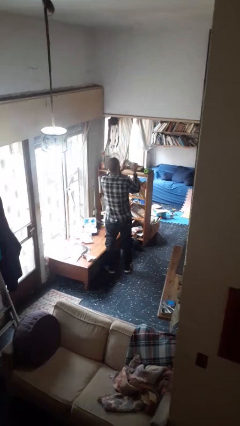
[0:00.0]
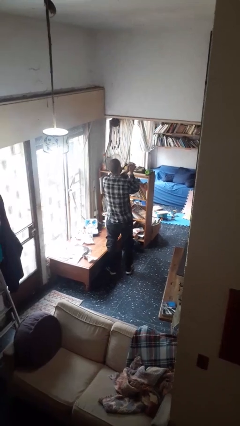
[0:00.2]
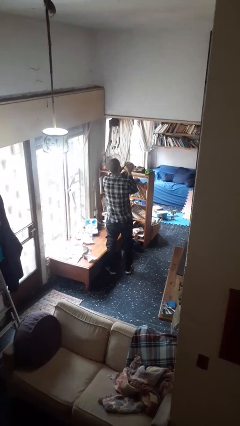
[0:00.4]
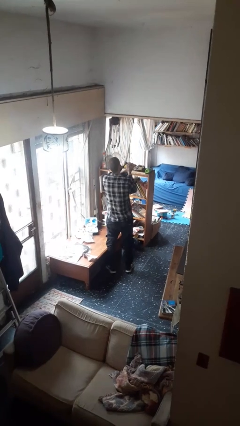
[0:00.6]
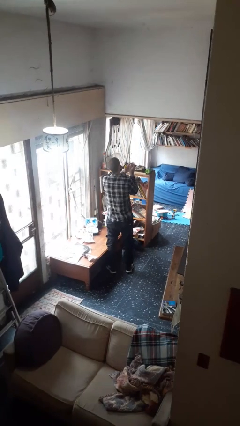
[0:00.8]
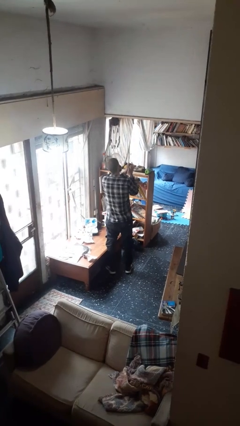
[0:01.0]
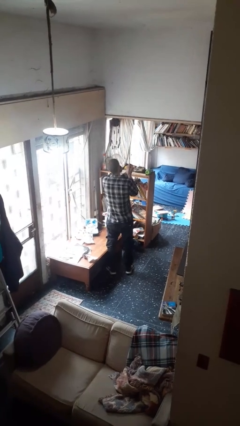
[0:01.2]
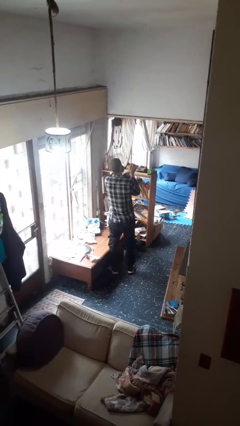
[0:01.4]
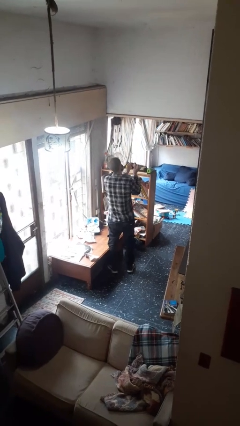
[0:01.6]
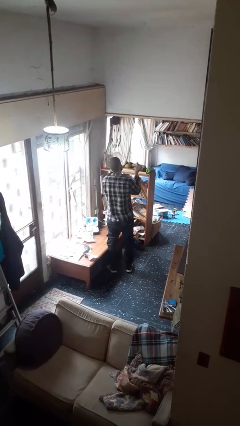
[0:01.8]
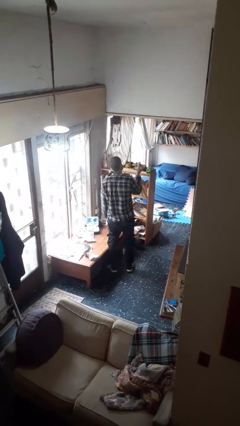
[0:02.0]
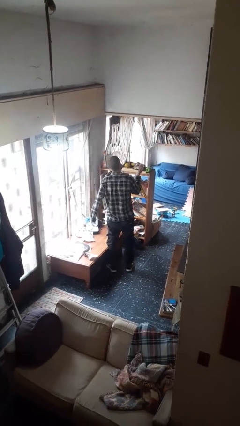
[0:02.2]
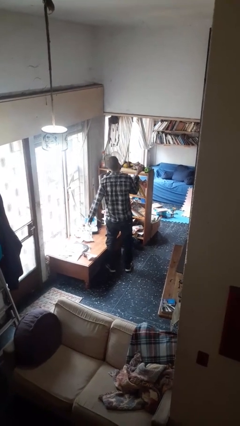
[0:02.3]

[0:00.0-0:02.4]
person crumples paper

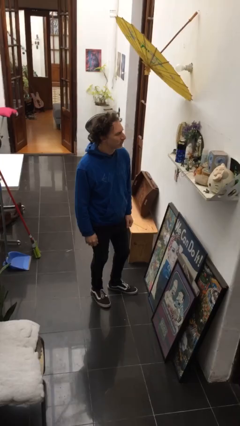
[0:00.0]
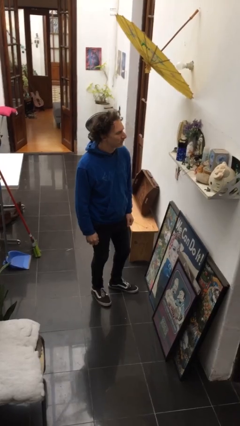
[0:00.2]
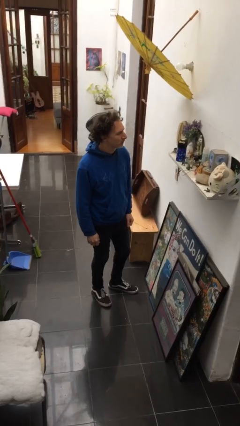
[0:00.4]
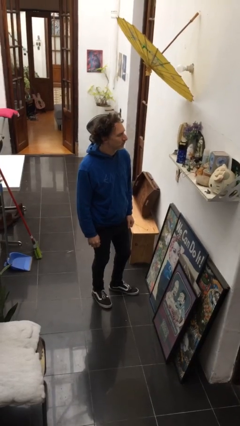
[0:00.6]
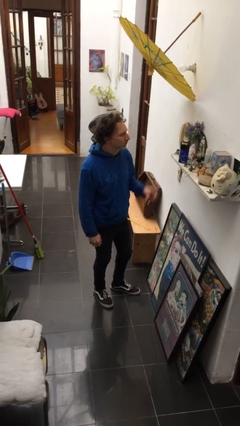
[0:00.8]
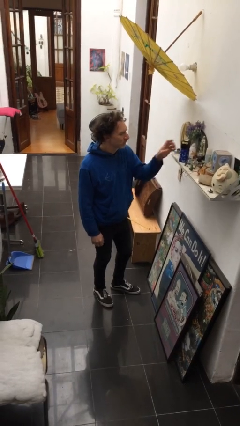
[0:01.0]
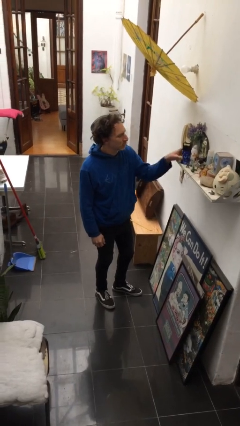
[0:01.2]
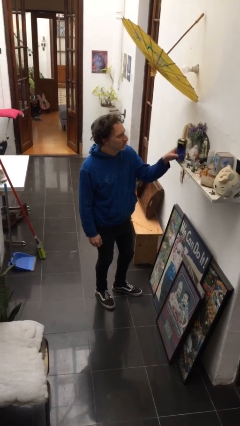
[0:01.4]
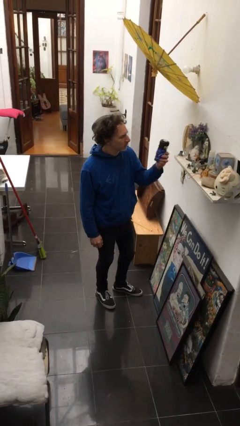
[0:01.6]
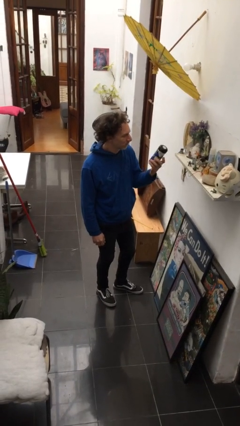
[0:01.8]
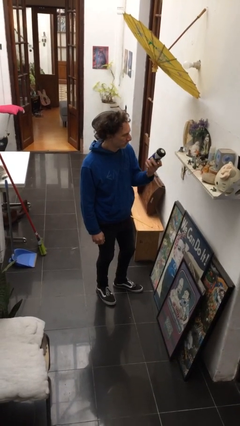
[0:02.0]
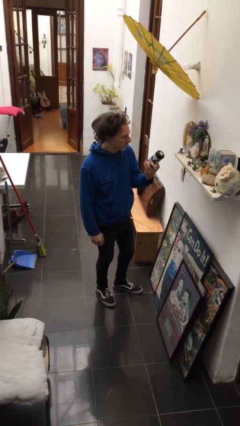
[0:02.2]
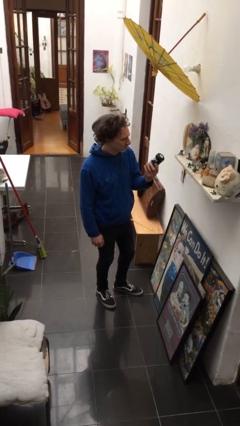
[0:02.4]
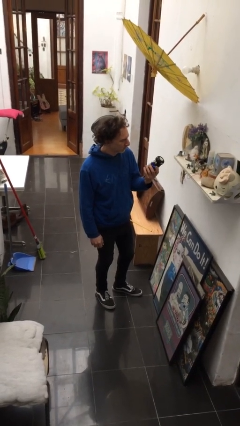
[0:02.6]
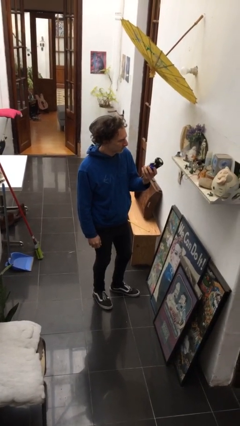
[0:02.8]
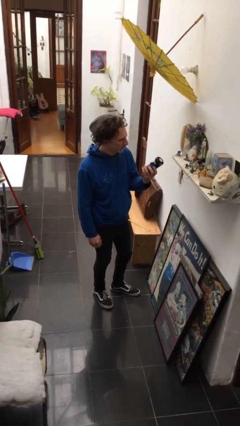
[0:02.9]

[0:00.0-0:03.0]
person picks up object from shelf

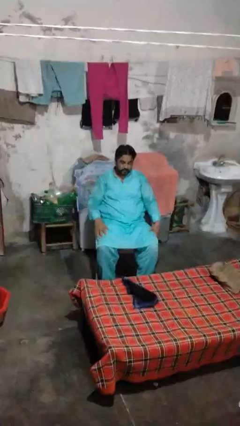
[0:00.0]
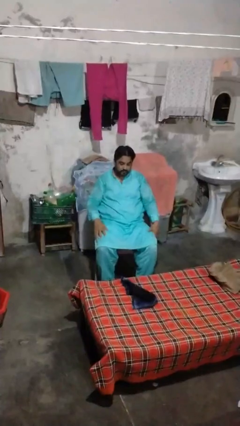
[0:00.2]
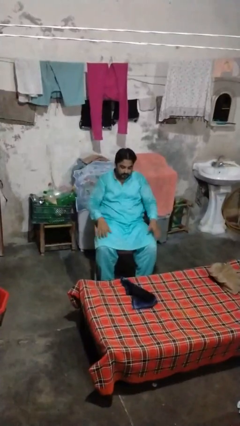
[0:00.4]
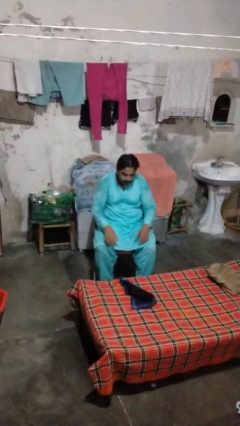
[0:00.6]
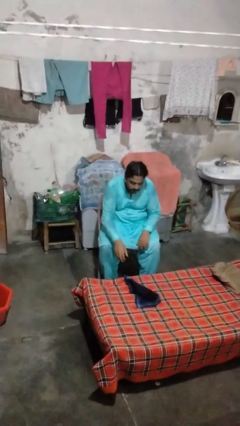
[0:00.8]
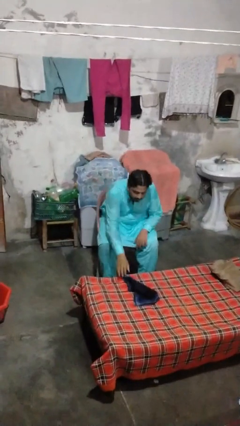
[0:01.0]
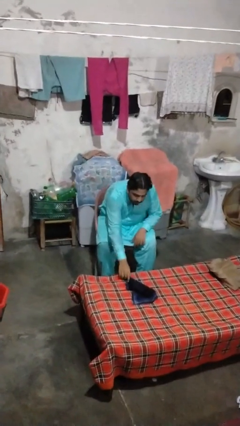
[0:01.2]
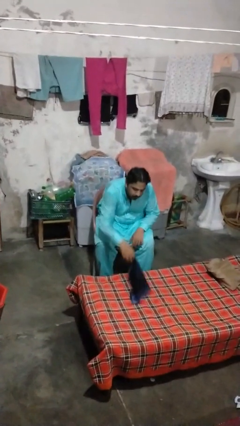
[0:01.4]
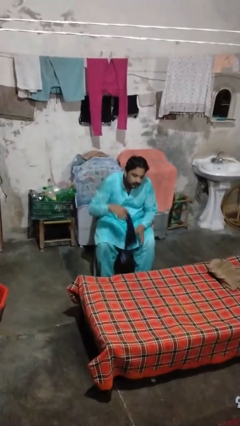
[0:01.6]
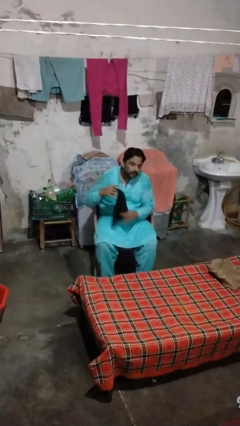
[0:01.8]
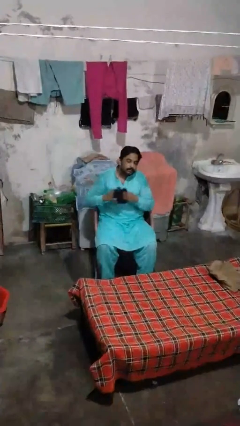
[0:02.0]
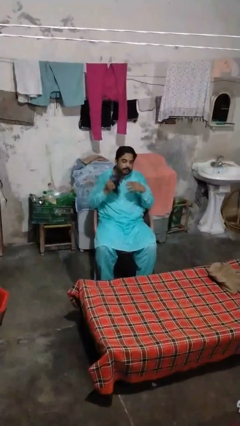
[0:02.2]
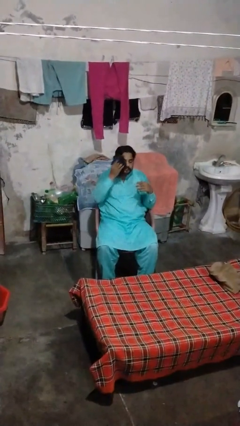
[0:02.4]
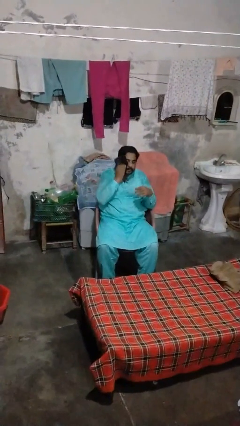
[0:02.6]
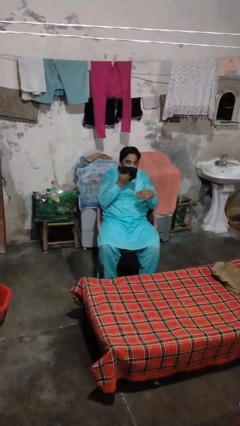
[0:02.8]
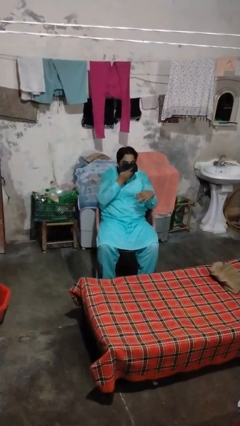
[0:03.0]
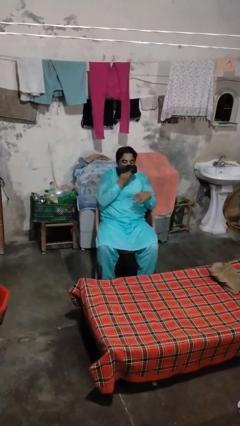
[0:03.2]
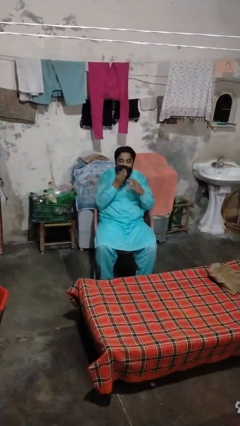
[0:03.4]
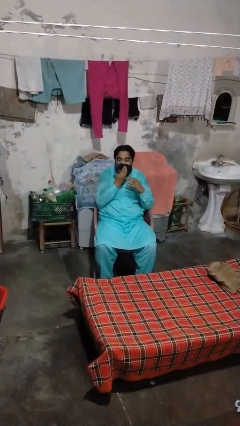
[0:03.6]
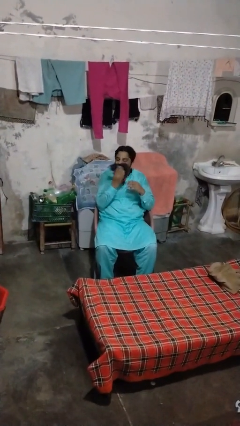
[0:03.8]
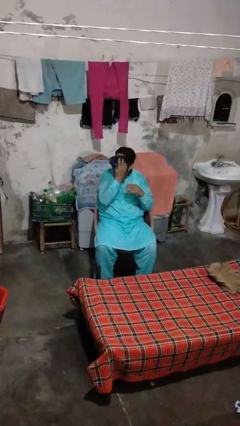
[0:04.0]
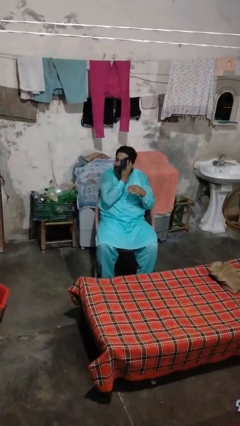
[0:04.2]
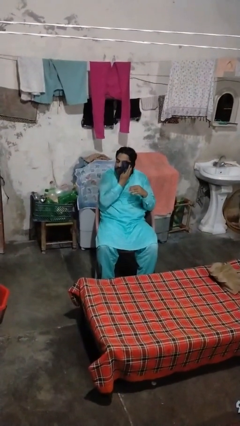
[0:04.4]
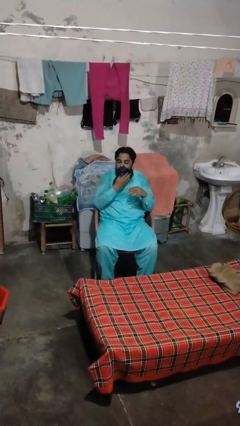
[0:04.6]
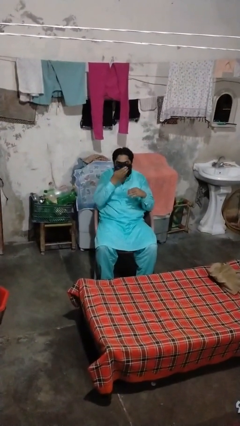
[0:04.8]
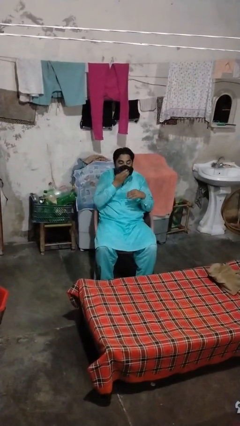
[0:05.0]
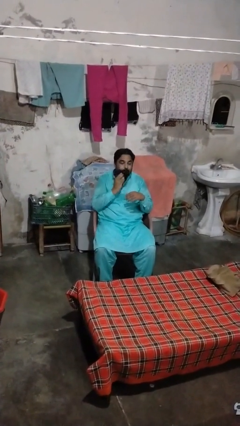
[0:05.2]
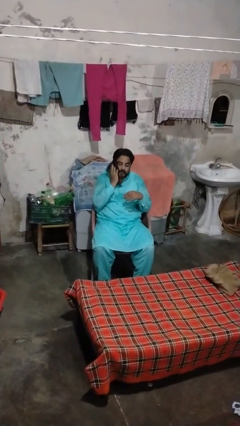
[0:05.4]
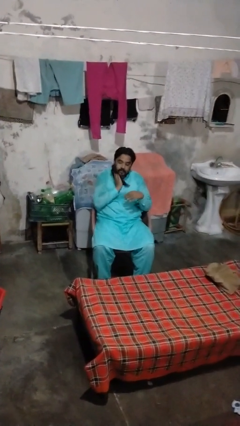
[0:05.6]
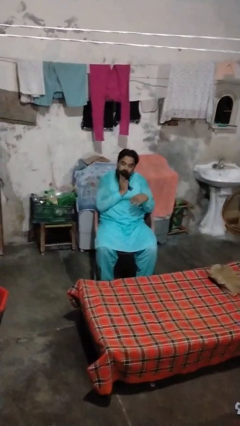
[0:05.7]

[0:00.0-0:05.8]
person wipes mouth with napkin

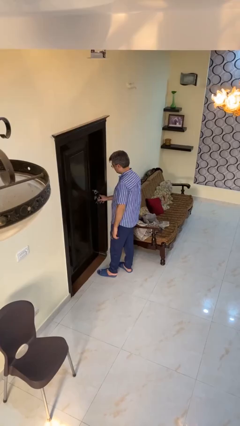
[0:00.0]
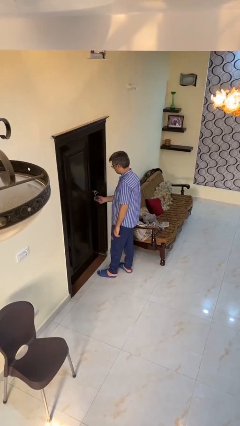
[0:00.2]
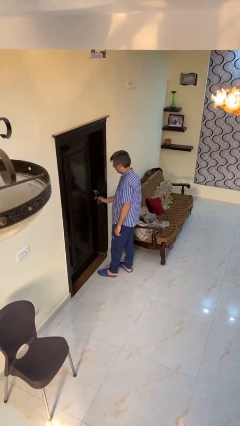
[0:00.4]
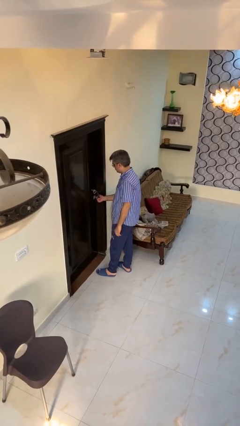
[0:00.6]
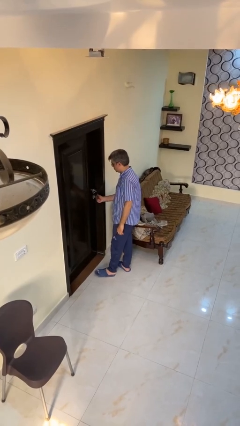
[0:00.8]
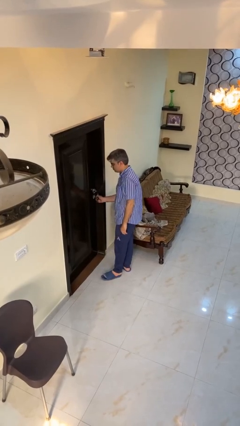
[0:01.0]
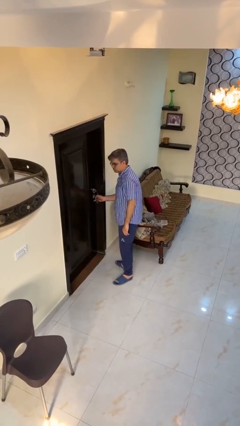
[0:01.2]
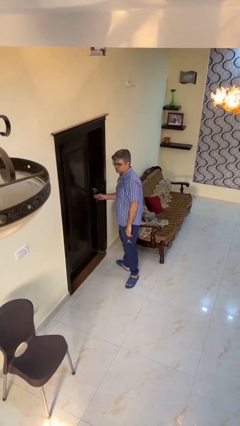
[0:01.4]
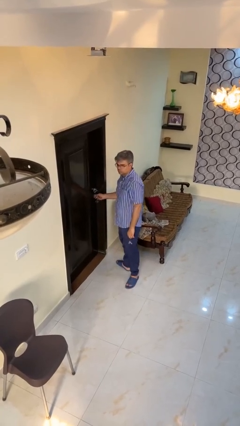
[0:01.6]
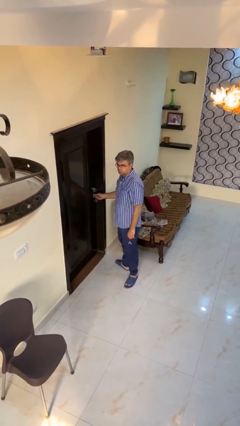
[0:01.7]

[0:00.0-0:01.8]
person locks door with keys

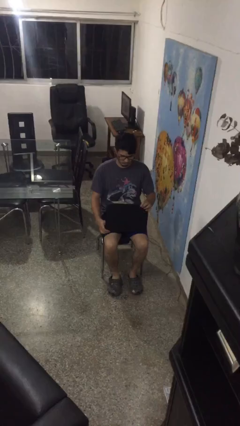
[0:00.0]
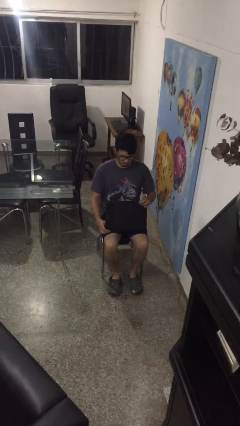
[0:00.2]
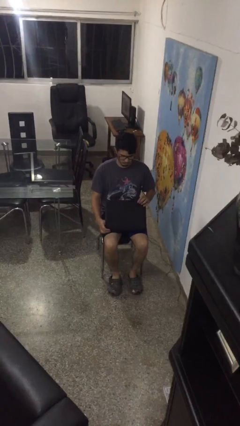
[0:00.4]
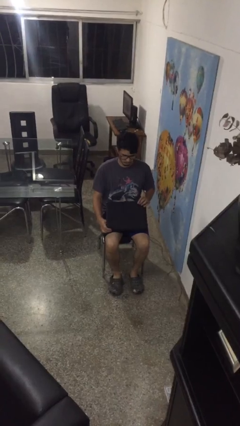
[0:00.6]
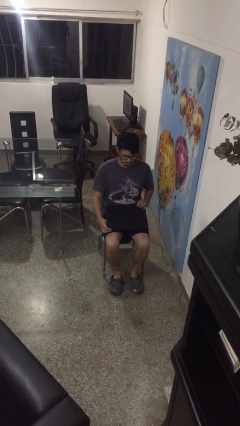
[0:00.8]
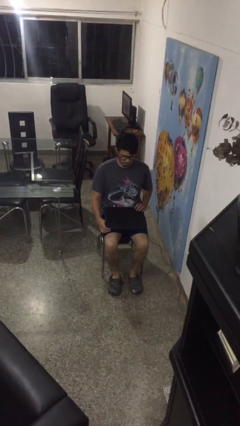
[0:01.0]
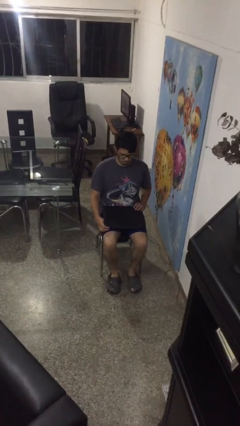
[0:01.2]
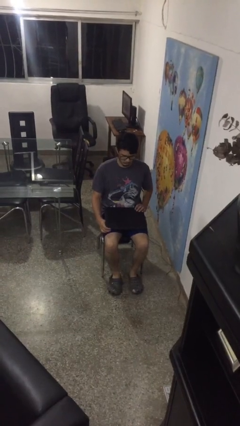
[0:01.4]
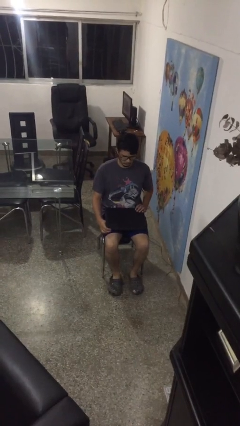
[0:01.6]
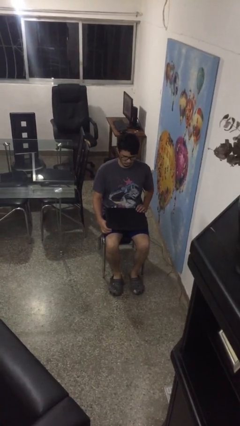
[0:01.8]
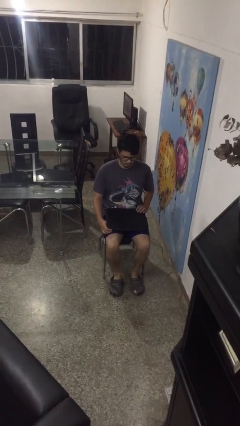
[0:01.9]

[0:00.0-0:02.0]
person closes laptop

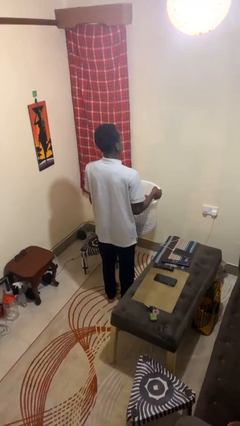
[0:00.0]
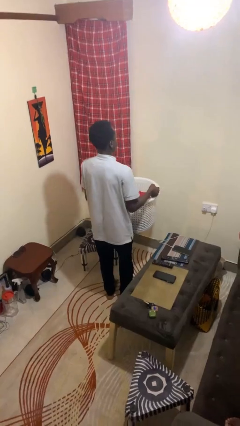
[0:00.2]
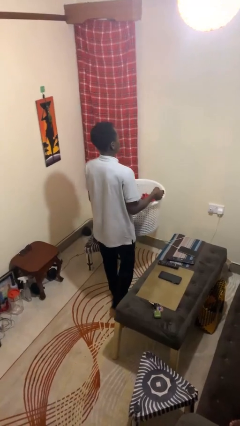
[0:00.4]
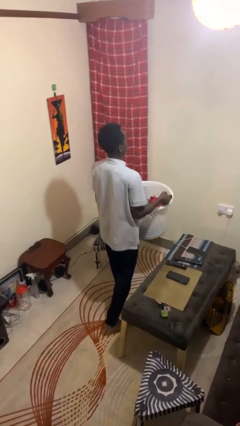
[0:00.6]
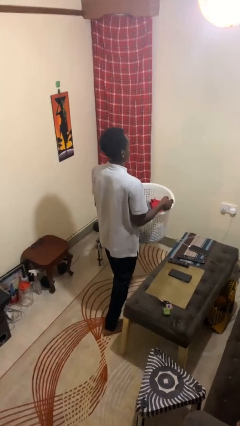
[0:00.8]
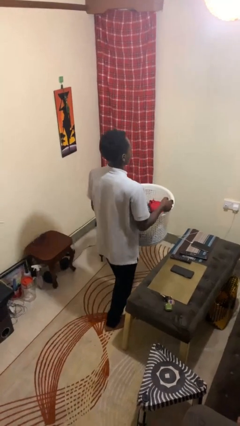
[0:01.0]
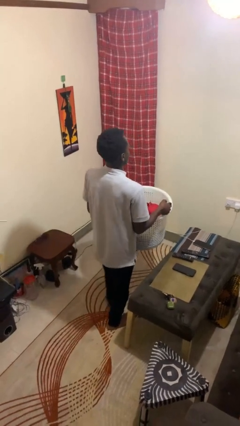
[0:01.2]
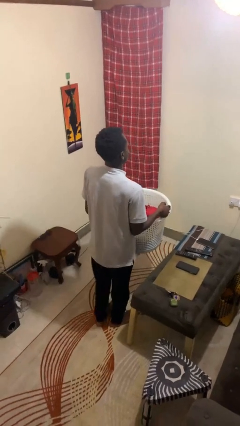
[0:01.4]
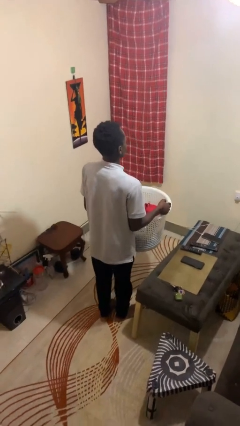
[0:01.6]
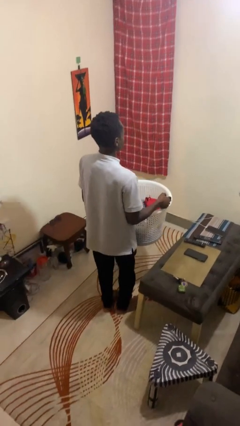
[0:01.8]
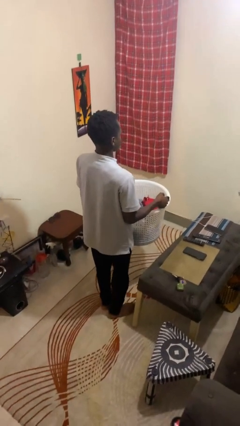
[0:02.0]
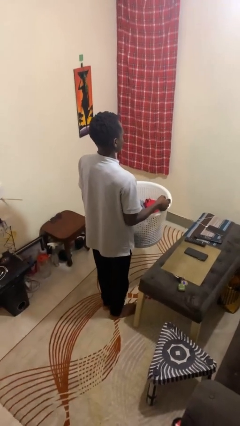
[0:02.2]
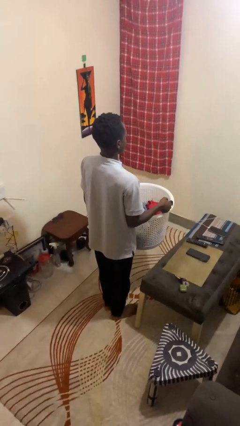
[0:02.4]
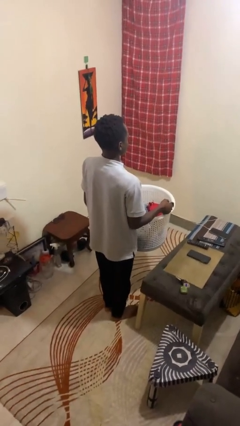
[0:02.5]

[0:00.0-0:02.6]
person carries laundry basket
